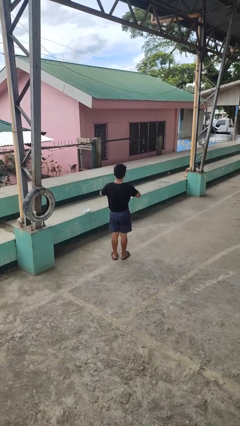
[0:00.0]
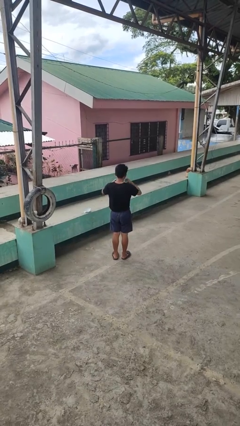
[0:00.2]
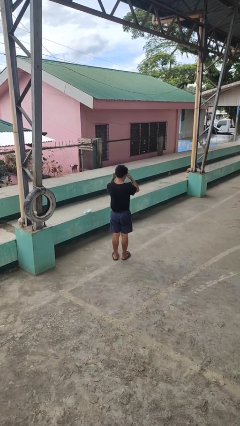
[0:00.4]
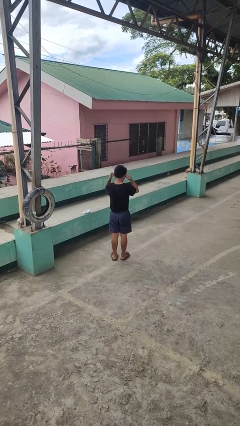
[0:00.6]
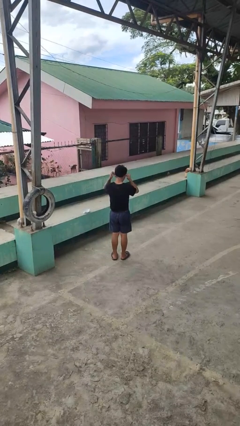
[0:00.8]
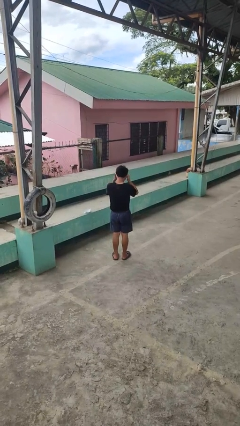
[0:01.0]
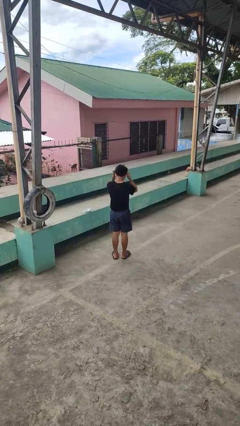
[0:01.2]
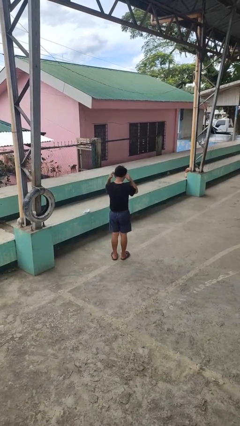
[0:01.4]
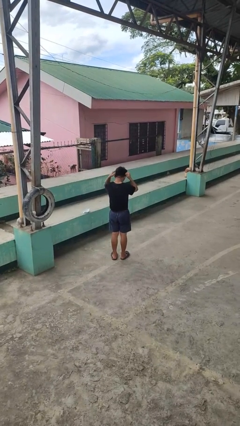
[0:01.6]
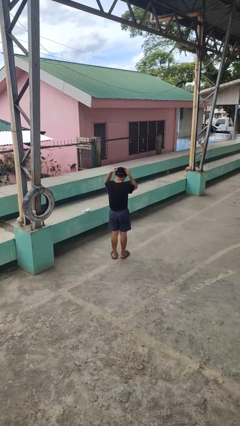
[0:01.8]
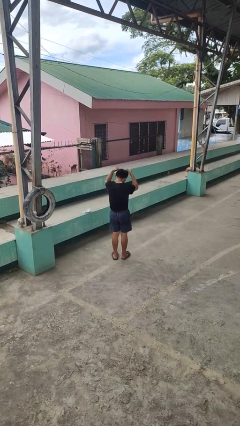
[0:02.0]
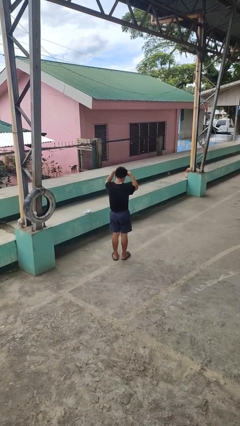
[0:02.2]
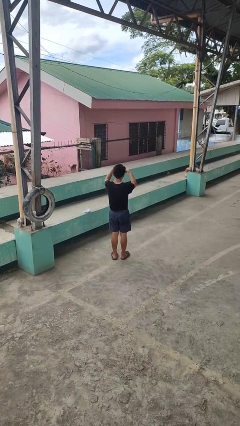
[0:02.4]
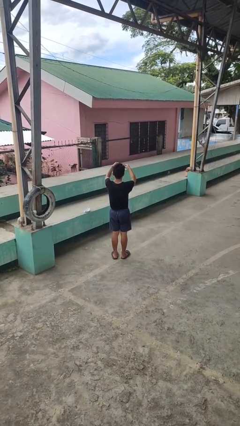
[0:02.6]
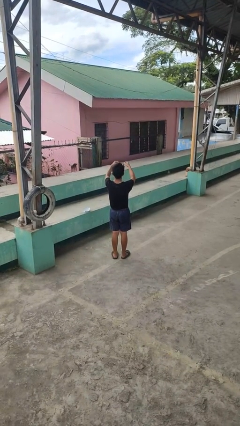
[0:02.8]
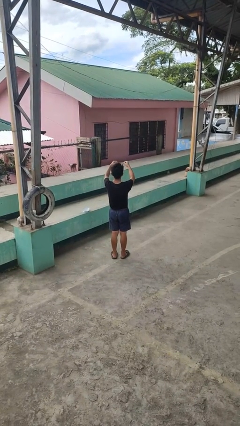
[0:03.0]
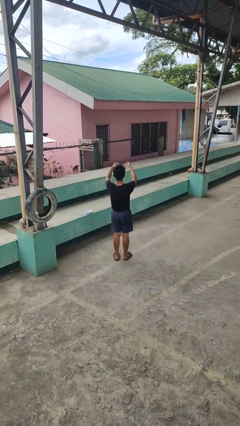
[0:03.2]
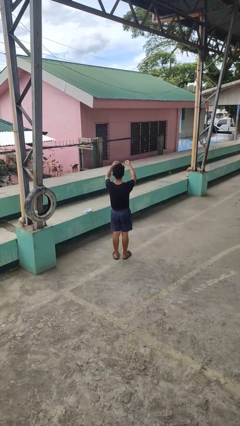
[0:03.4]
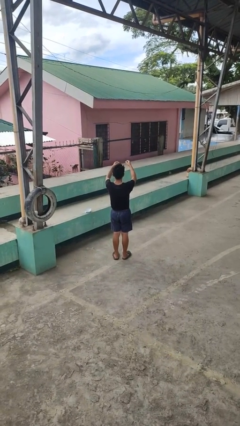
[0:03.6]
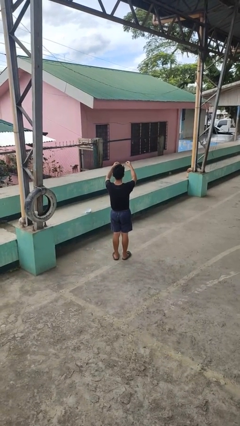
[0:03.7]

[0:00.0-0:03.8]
person takes off necklace

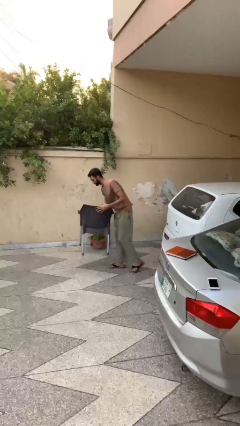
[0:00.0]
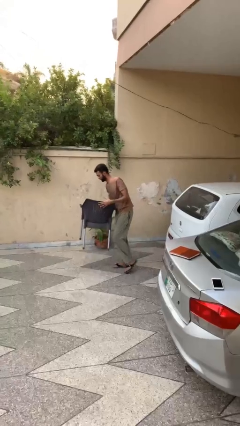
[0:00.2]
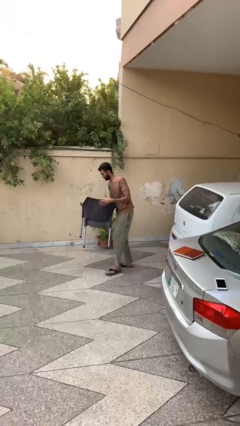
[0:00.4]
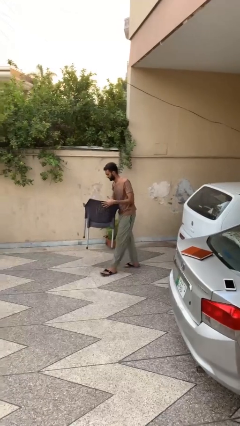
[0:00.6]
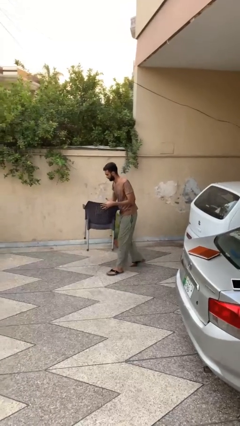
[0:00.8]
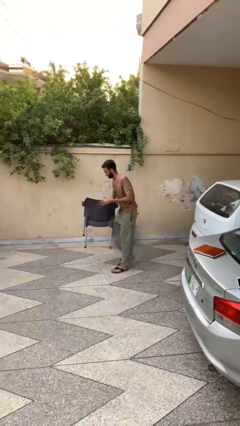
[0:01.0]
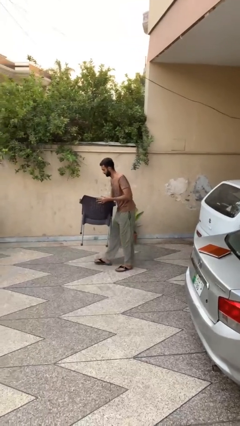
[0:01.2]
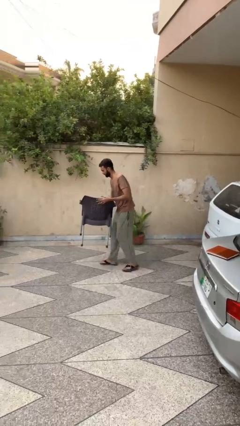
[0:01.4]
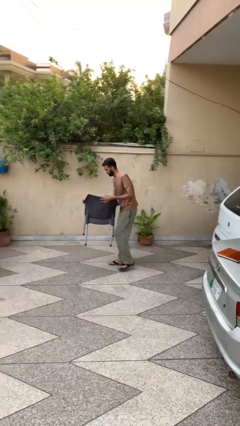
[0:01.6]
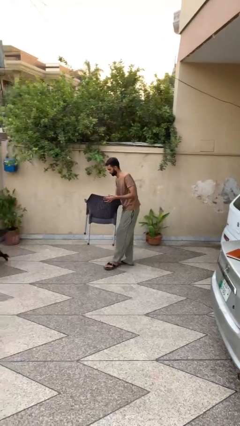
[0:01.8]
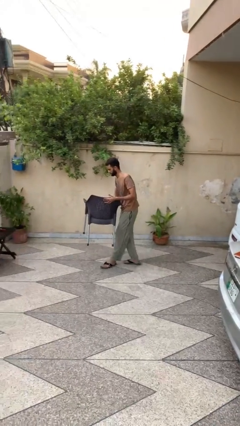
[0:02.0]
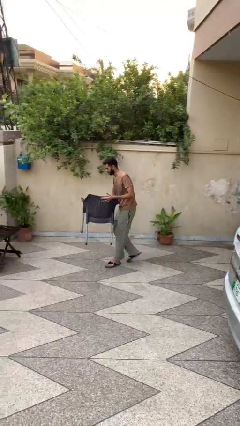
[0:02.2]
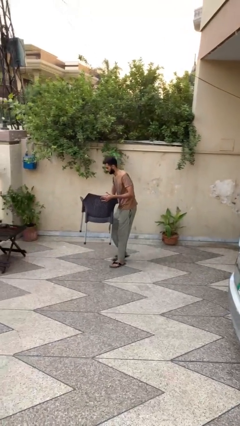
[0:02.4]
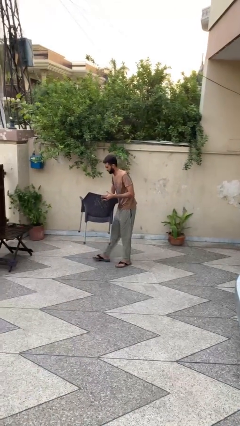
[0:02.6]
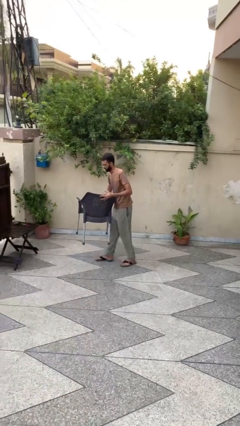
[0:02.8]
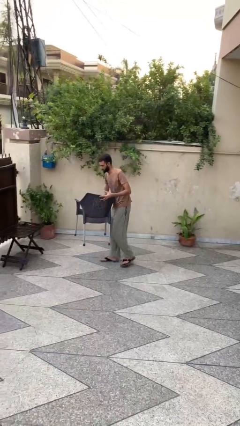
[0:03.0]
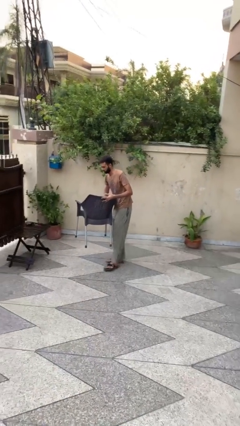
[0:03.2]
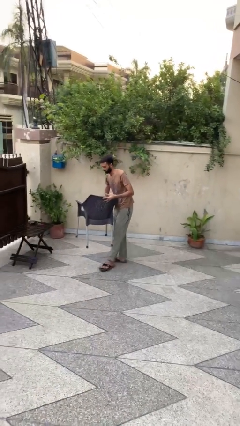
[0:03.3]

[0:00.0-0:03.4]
person carries heavy object

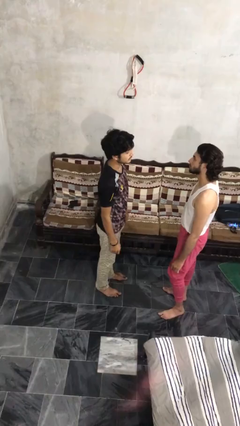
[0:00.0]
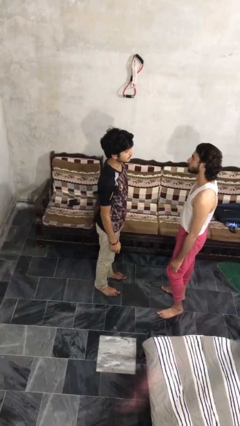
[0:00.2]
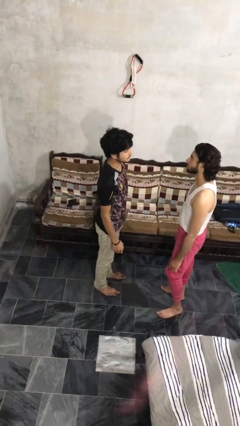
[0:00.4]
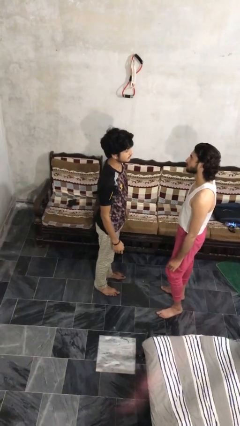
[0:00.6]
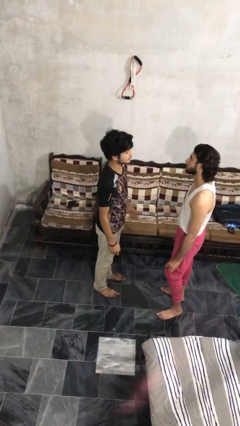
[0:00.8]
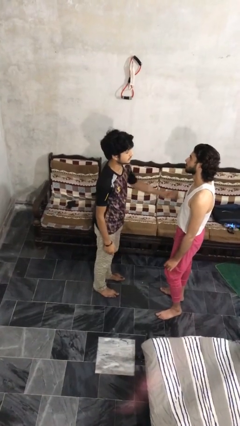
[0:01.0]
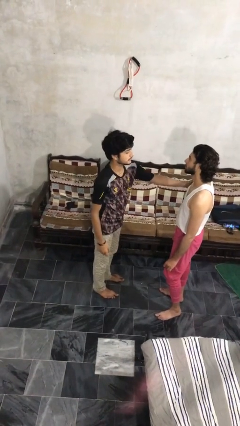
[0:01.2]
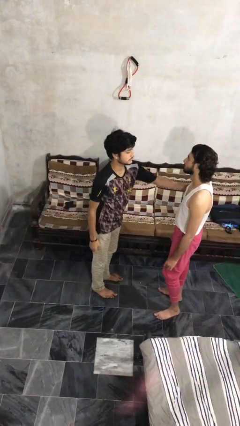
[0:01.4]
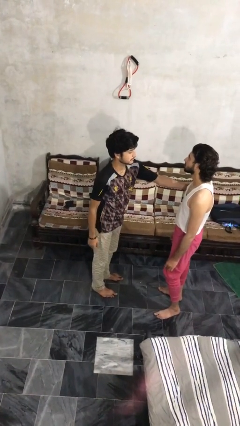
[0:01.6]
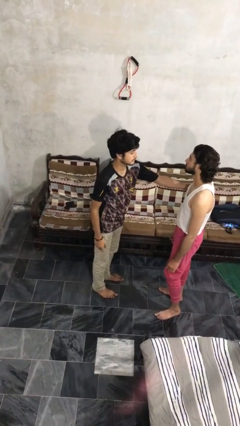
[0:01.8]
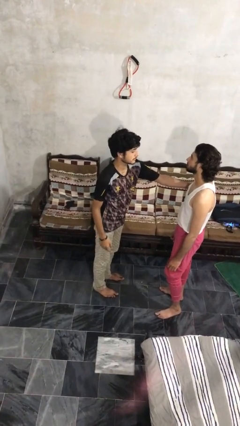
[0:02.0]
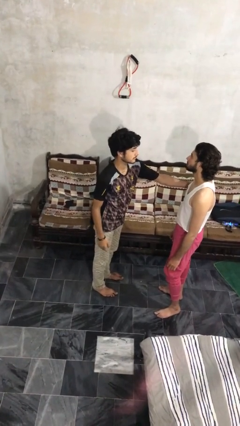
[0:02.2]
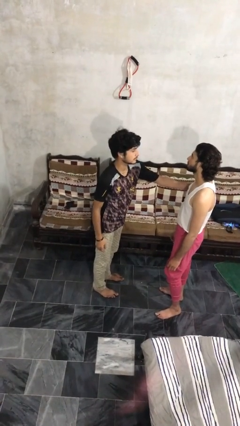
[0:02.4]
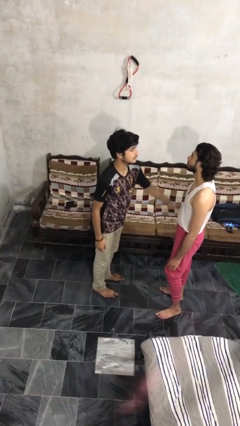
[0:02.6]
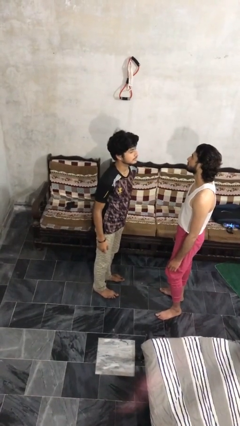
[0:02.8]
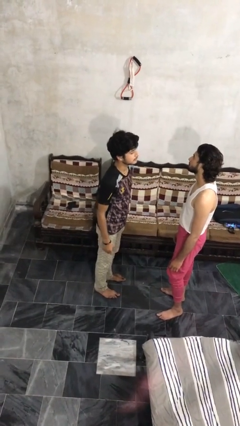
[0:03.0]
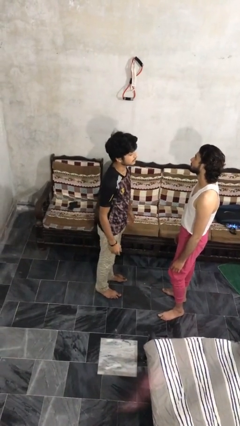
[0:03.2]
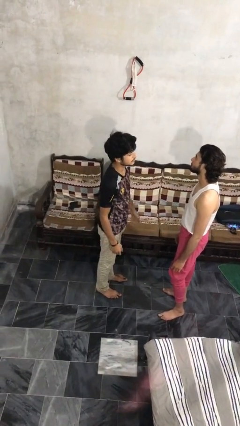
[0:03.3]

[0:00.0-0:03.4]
person grabs person by bicep

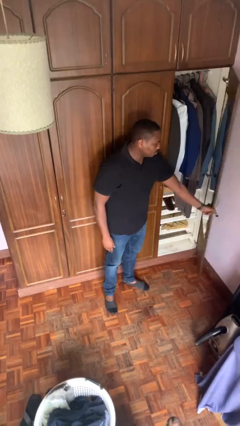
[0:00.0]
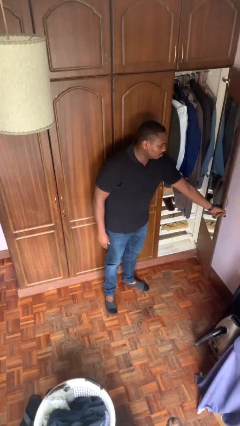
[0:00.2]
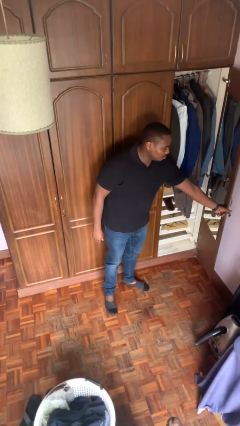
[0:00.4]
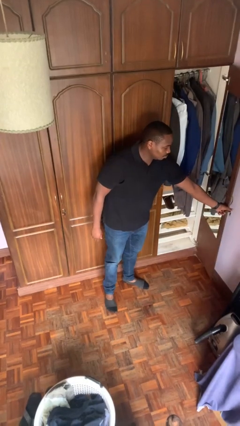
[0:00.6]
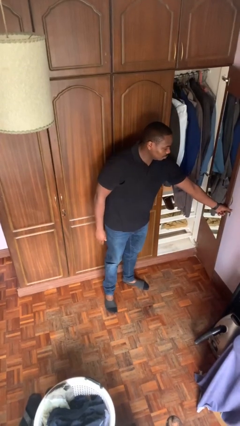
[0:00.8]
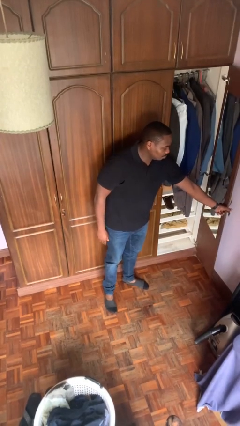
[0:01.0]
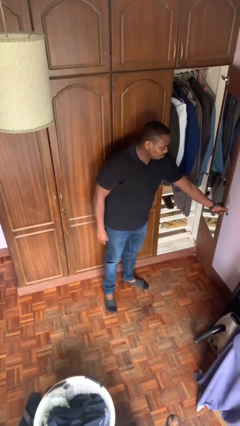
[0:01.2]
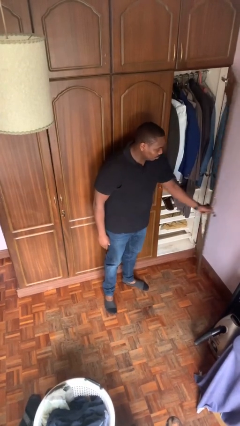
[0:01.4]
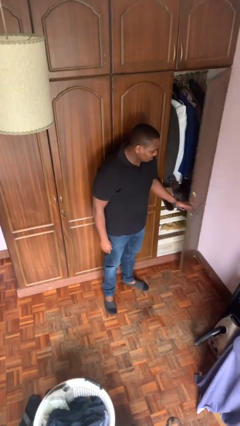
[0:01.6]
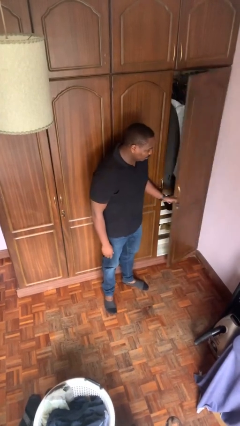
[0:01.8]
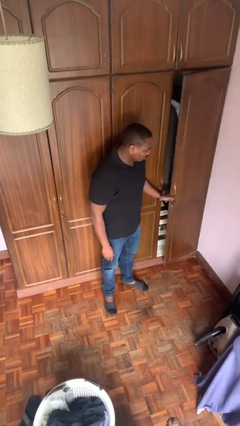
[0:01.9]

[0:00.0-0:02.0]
person opens closet door

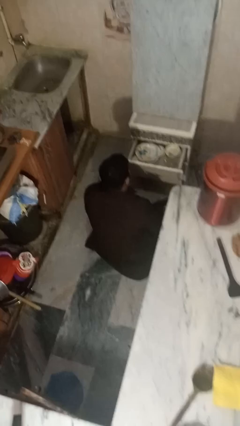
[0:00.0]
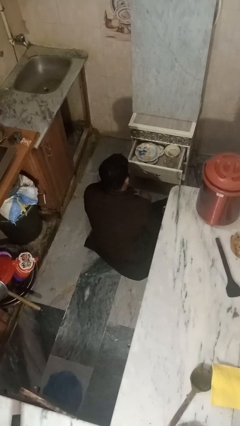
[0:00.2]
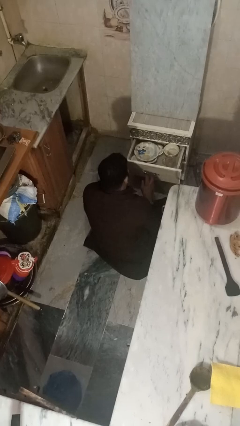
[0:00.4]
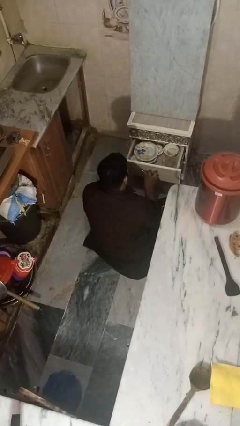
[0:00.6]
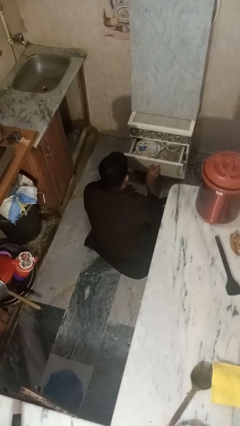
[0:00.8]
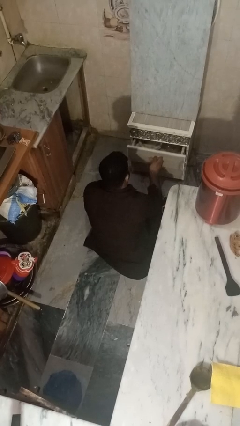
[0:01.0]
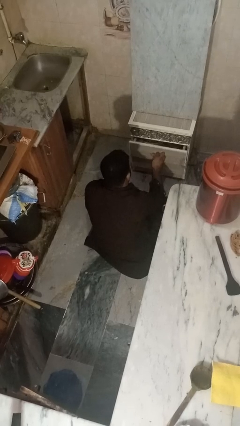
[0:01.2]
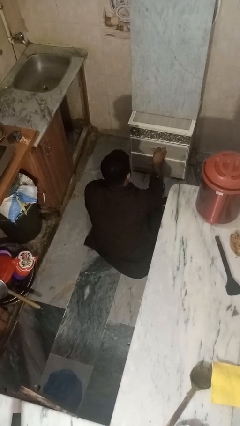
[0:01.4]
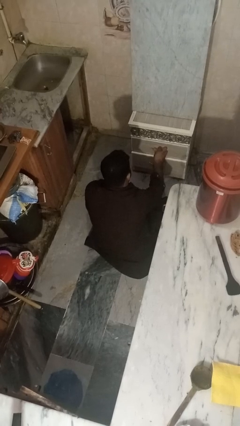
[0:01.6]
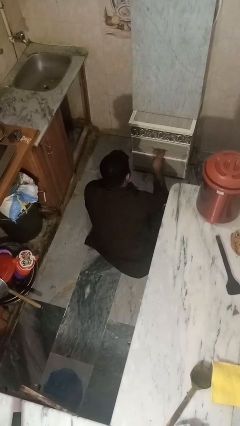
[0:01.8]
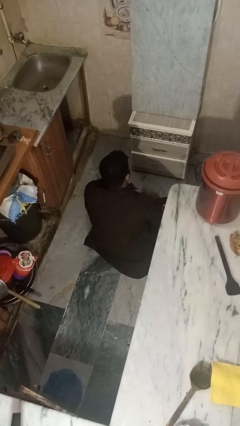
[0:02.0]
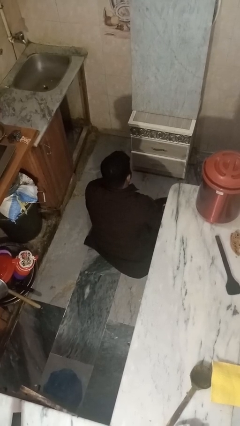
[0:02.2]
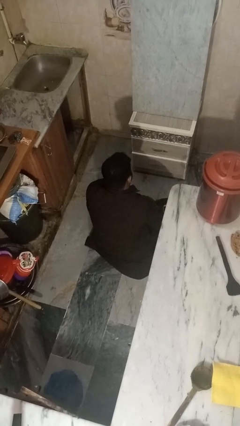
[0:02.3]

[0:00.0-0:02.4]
person closes kitchen drawer

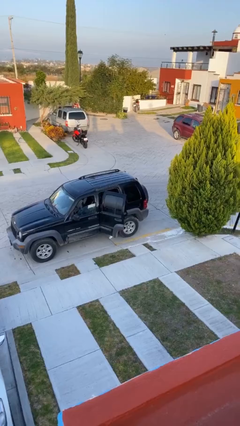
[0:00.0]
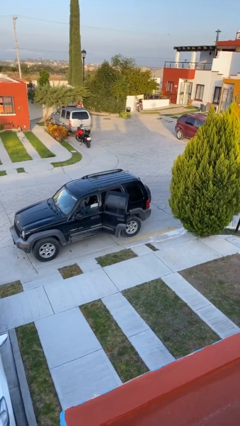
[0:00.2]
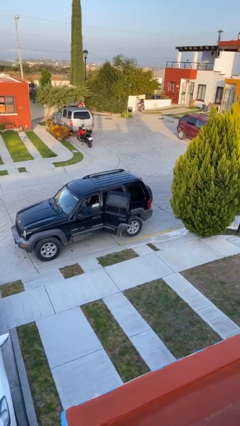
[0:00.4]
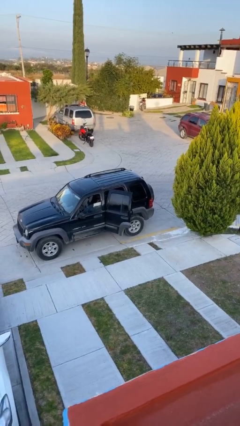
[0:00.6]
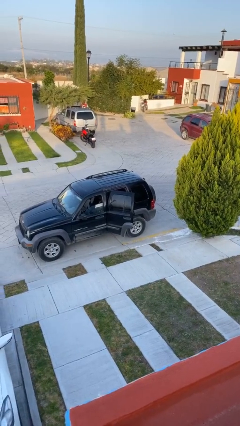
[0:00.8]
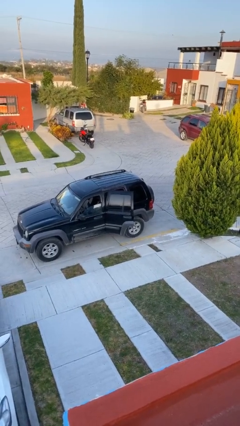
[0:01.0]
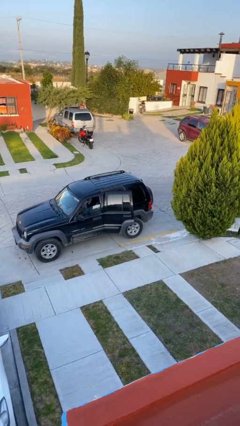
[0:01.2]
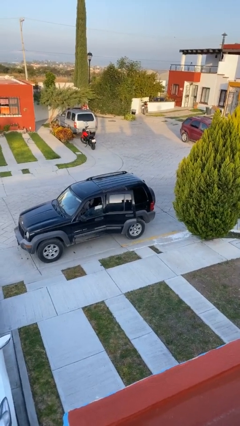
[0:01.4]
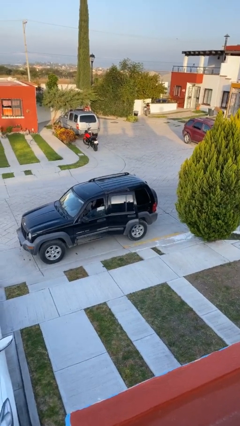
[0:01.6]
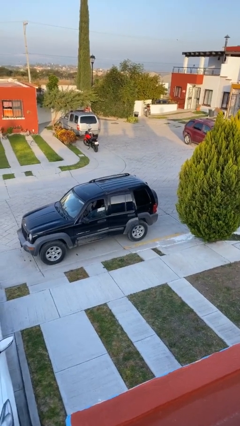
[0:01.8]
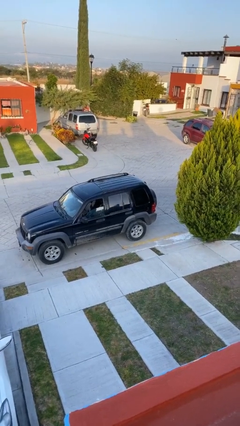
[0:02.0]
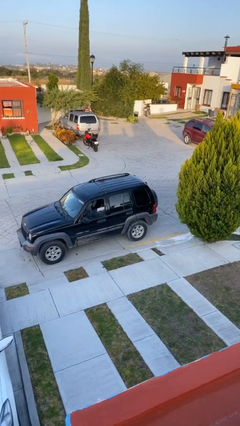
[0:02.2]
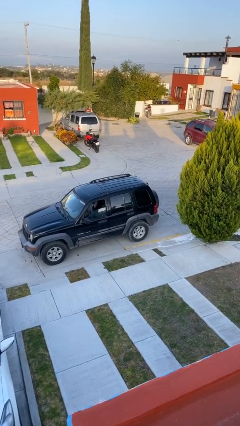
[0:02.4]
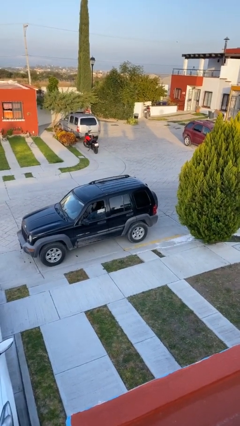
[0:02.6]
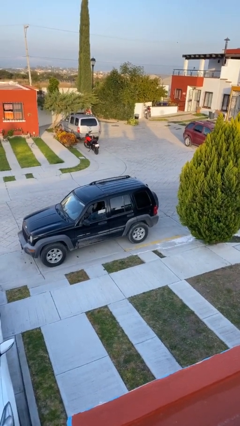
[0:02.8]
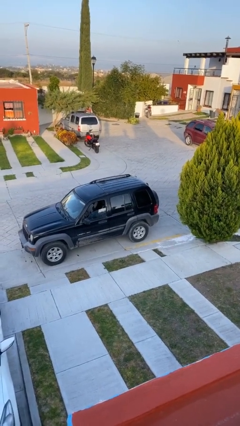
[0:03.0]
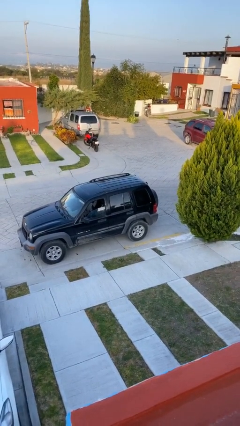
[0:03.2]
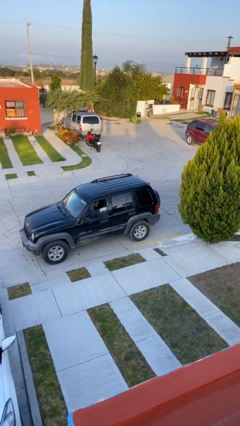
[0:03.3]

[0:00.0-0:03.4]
person closes car door
